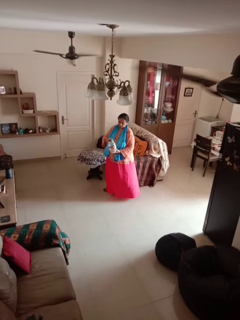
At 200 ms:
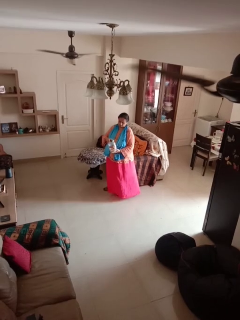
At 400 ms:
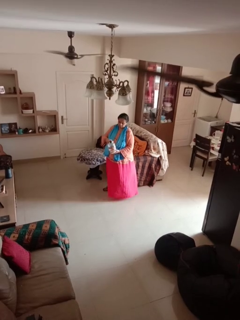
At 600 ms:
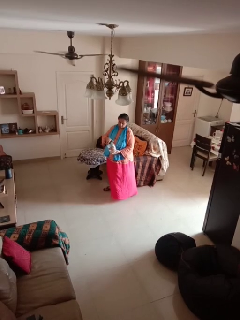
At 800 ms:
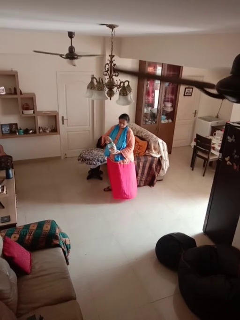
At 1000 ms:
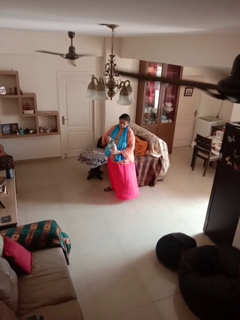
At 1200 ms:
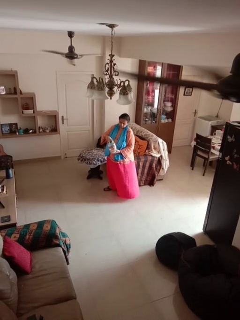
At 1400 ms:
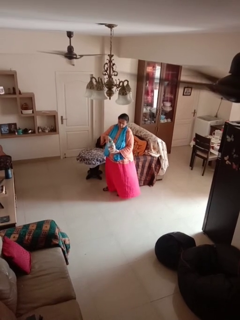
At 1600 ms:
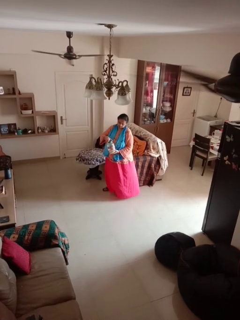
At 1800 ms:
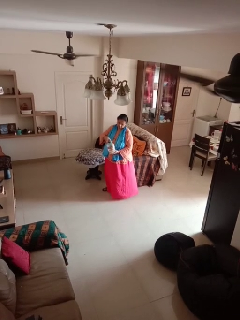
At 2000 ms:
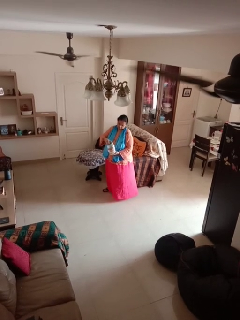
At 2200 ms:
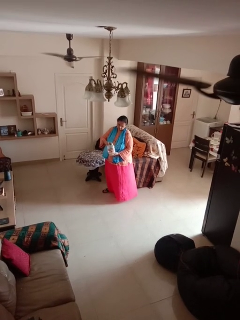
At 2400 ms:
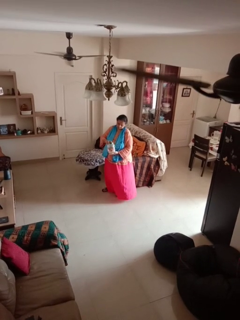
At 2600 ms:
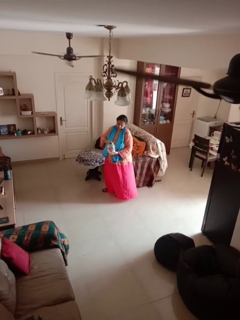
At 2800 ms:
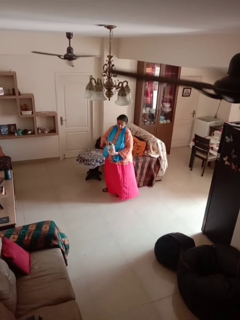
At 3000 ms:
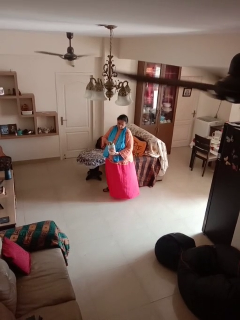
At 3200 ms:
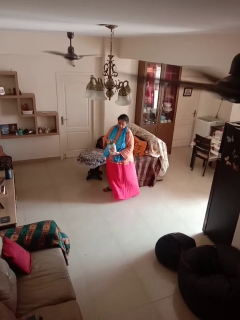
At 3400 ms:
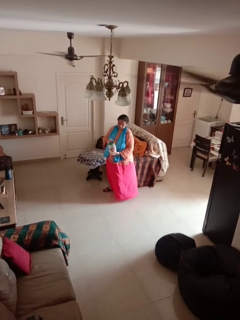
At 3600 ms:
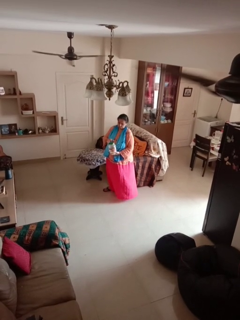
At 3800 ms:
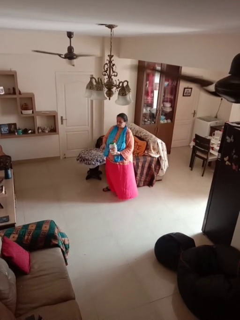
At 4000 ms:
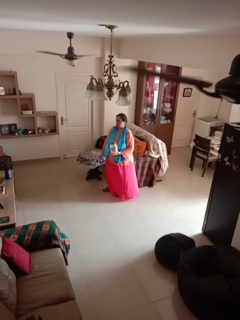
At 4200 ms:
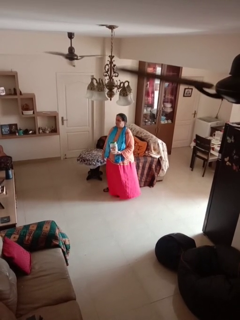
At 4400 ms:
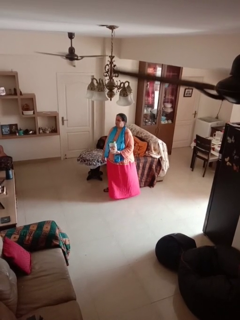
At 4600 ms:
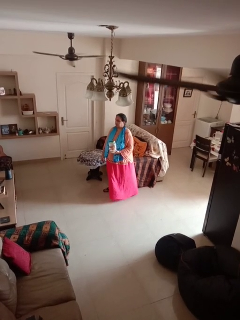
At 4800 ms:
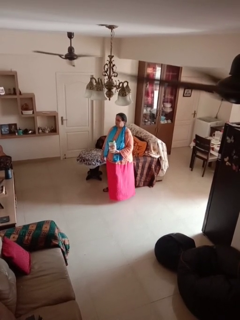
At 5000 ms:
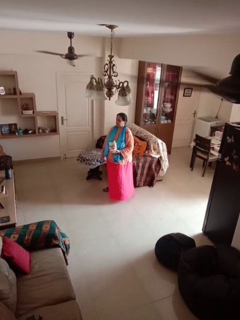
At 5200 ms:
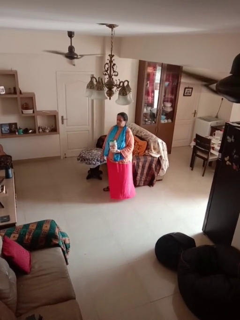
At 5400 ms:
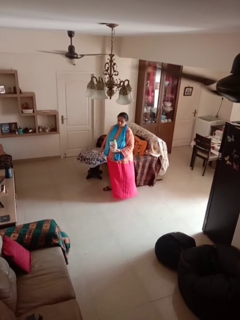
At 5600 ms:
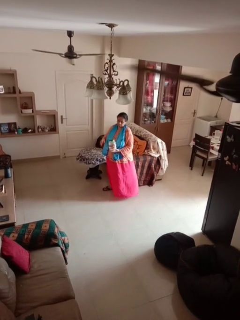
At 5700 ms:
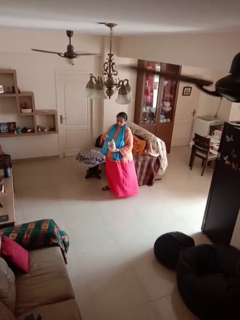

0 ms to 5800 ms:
person closes jar

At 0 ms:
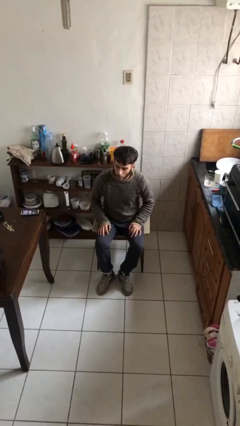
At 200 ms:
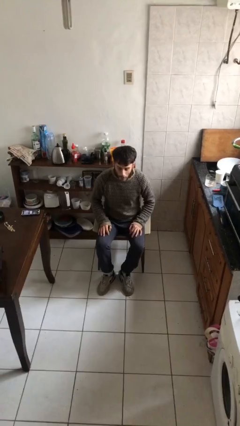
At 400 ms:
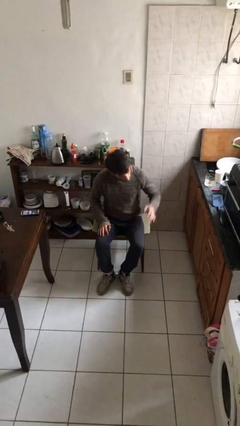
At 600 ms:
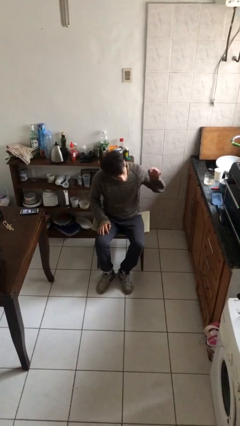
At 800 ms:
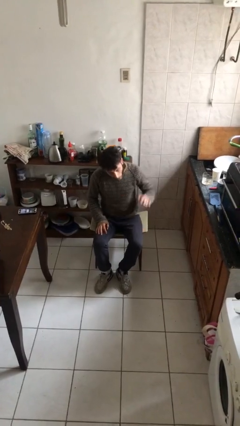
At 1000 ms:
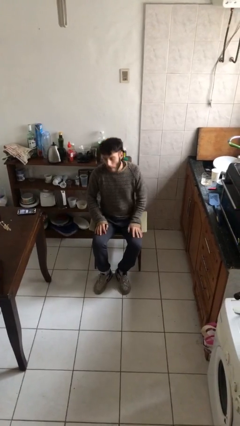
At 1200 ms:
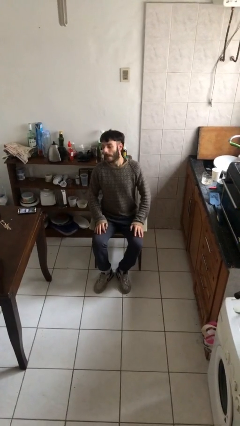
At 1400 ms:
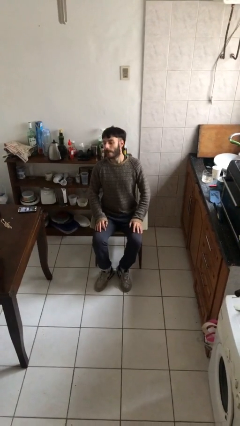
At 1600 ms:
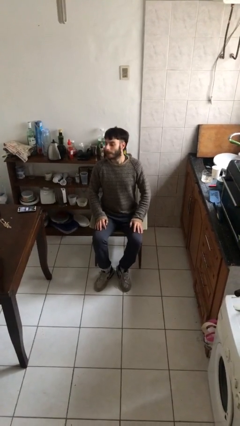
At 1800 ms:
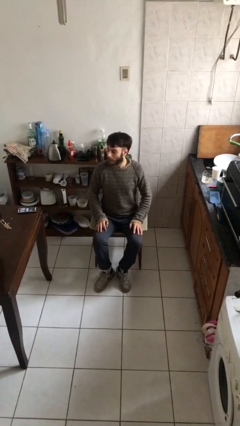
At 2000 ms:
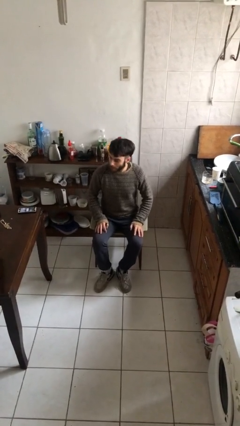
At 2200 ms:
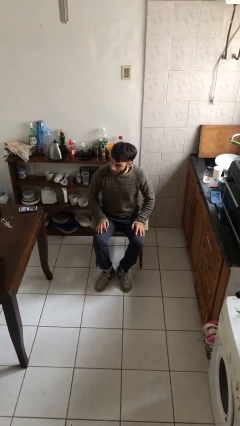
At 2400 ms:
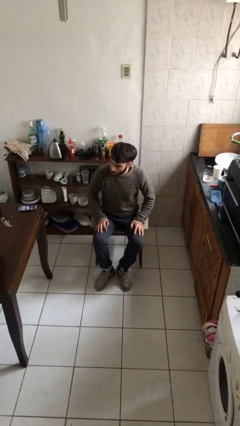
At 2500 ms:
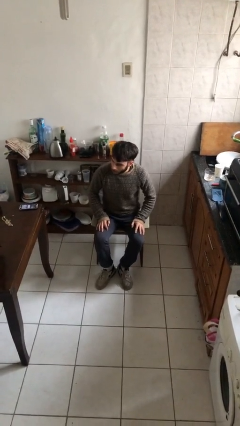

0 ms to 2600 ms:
person slaps hands on thighs

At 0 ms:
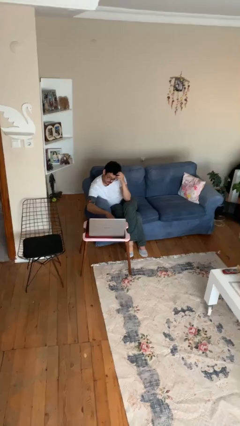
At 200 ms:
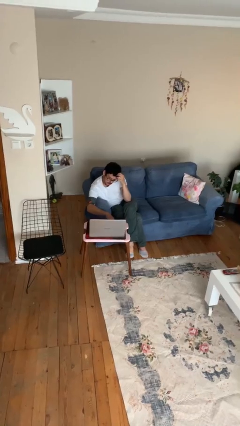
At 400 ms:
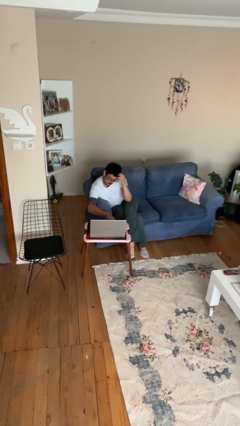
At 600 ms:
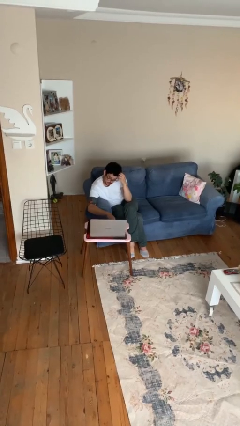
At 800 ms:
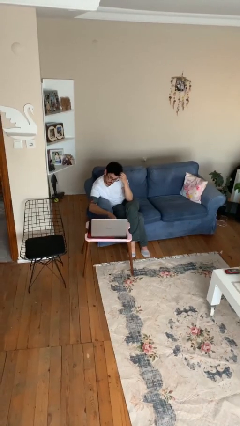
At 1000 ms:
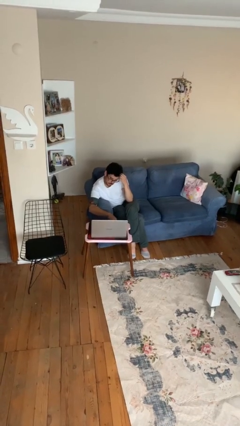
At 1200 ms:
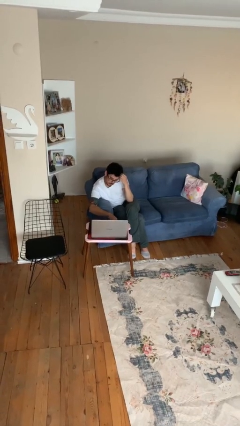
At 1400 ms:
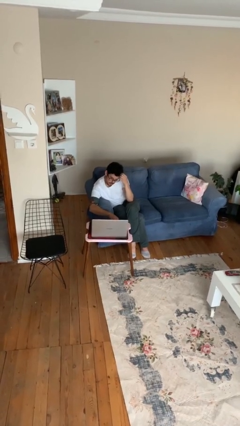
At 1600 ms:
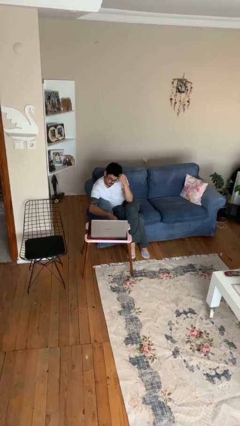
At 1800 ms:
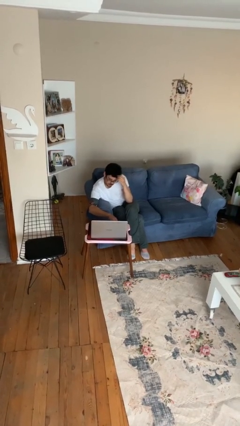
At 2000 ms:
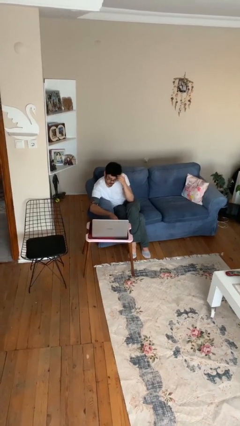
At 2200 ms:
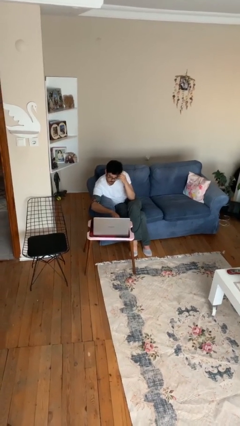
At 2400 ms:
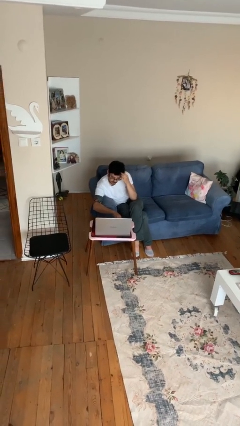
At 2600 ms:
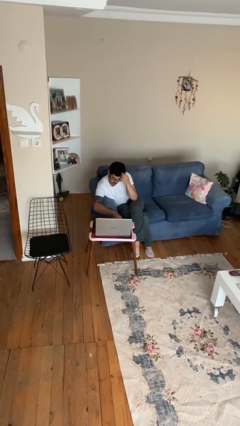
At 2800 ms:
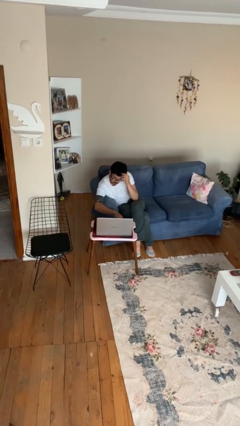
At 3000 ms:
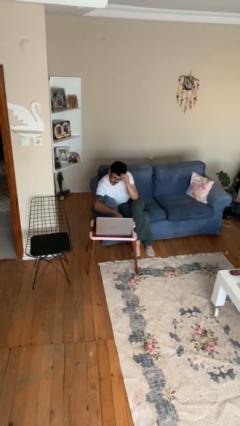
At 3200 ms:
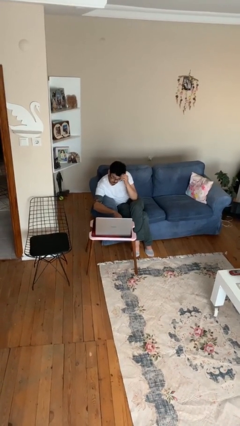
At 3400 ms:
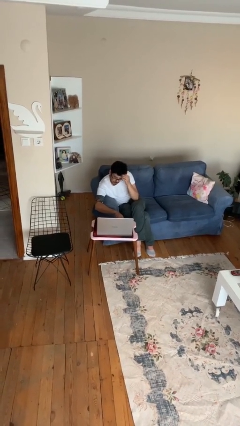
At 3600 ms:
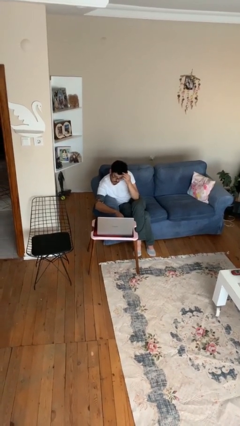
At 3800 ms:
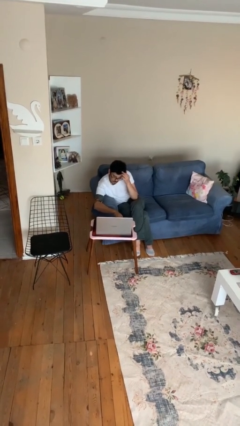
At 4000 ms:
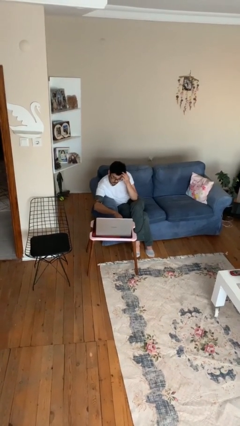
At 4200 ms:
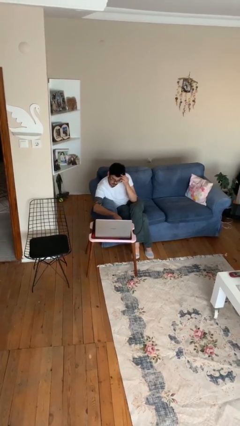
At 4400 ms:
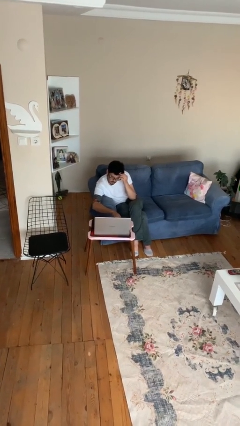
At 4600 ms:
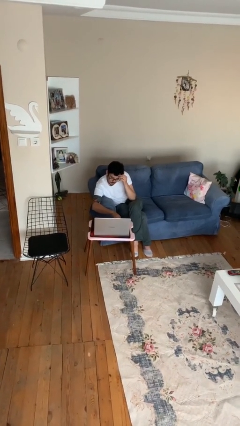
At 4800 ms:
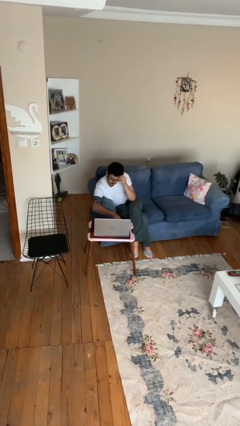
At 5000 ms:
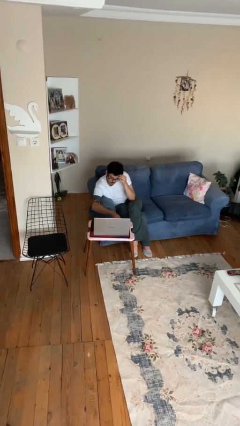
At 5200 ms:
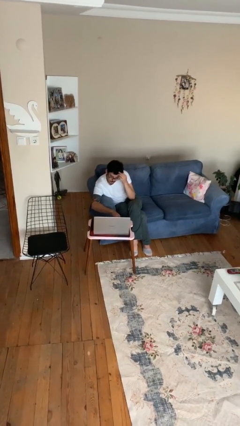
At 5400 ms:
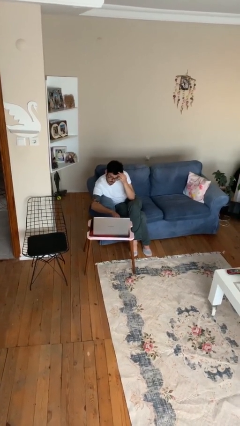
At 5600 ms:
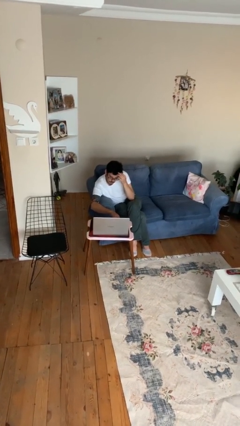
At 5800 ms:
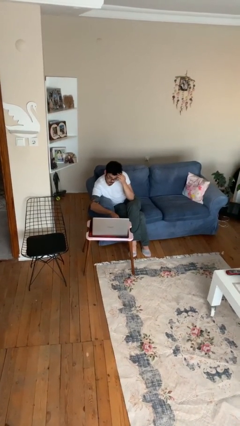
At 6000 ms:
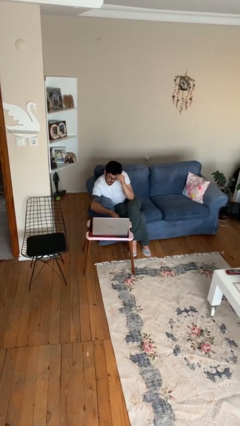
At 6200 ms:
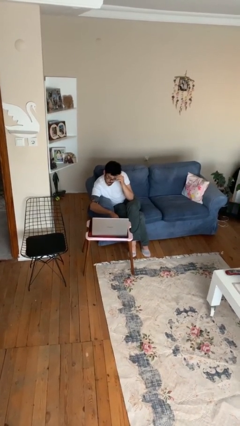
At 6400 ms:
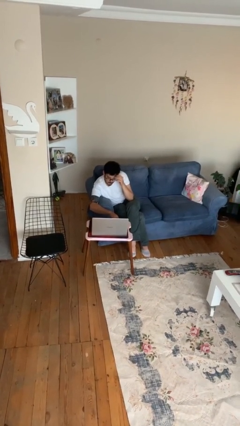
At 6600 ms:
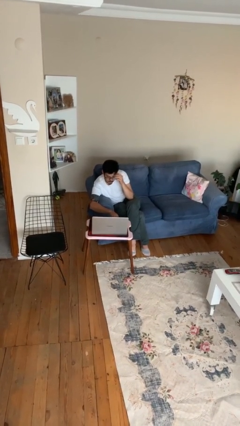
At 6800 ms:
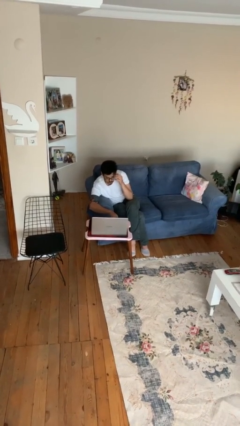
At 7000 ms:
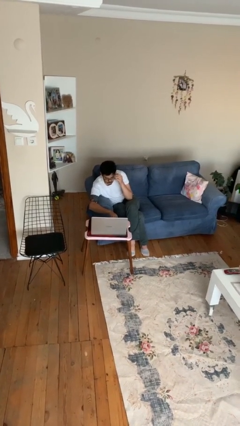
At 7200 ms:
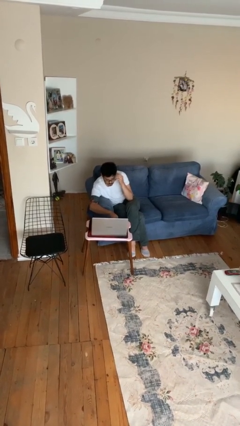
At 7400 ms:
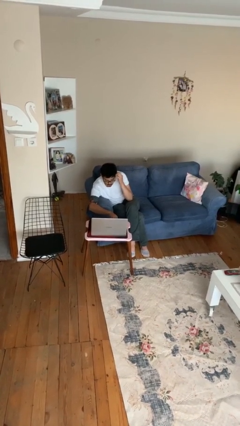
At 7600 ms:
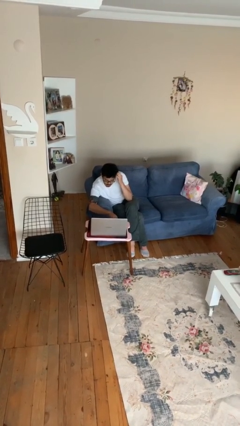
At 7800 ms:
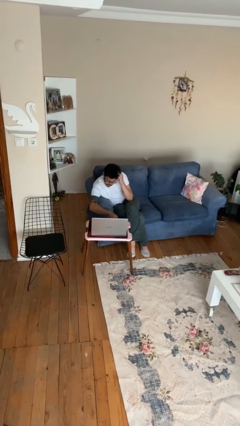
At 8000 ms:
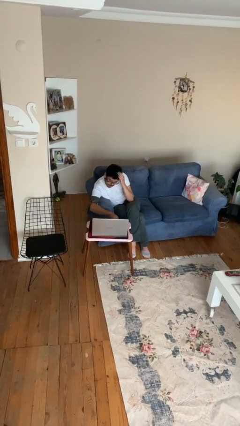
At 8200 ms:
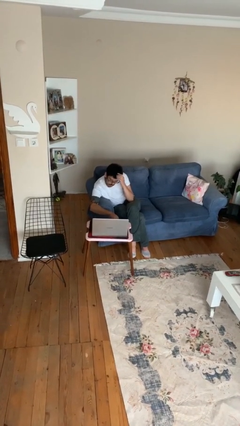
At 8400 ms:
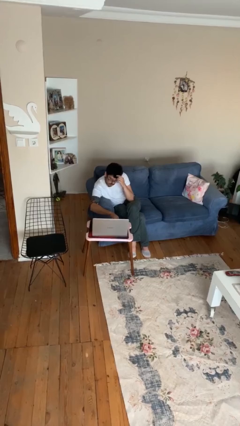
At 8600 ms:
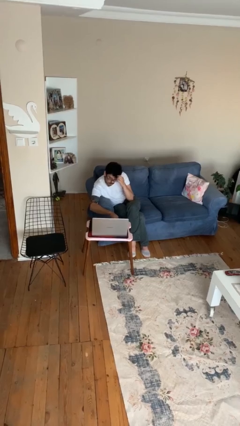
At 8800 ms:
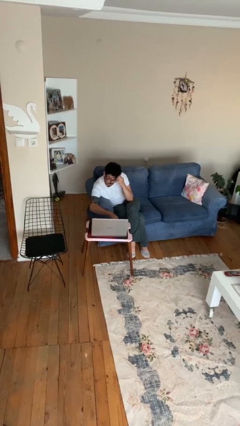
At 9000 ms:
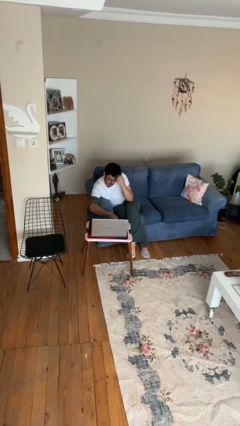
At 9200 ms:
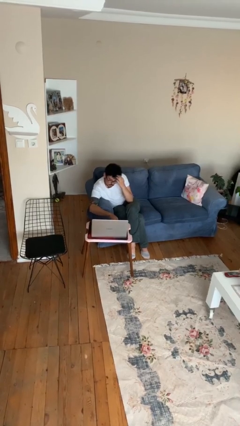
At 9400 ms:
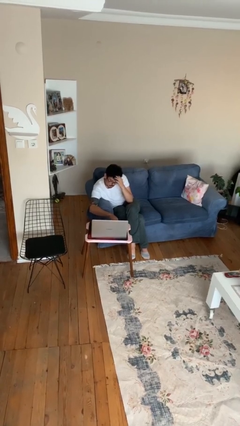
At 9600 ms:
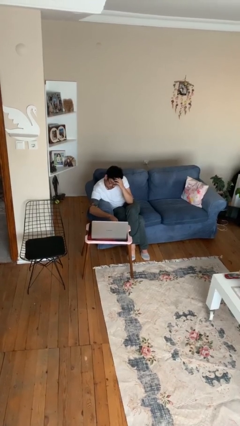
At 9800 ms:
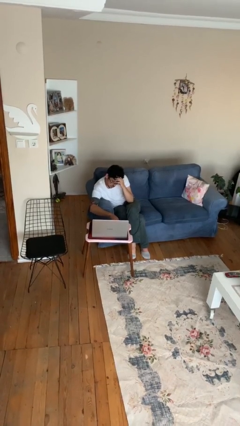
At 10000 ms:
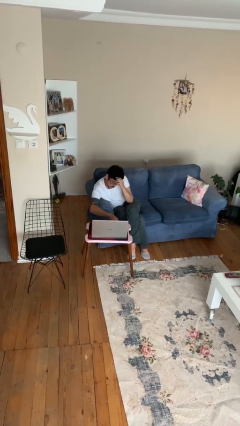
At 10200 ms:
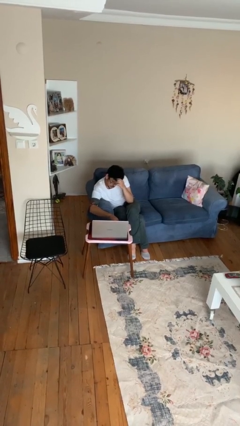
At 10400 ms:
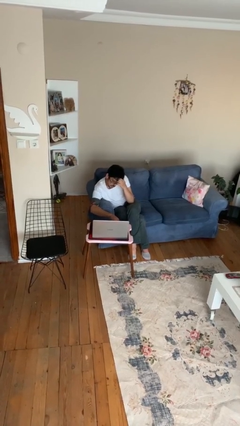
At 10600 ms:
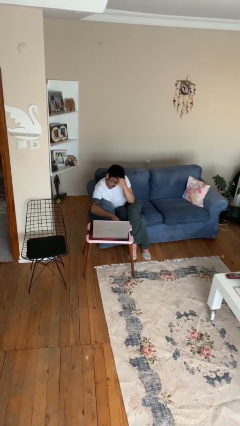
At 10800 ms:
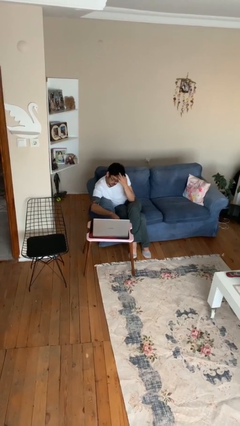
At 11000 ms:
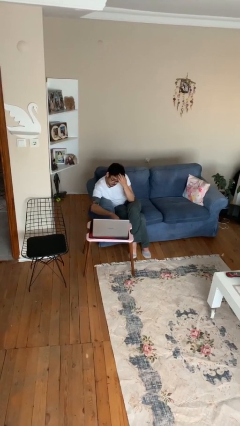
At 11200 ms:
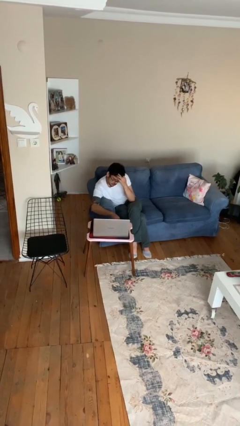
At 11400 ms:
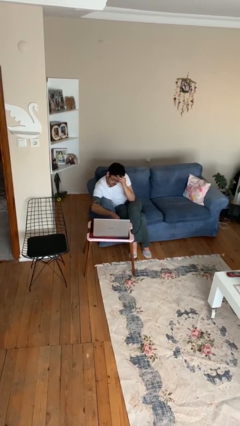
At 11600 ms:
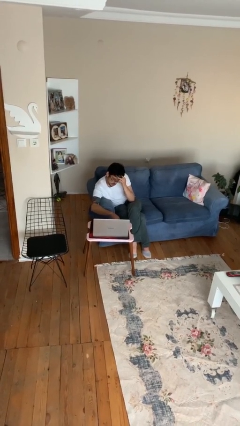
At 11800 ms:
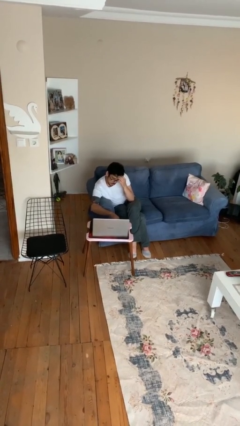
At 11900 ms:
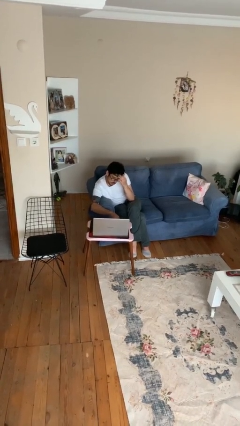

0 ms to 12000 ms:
person interacts with laptop
